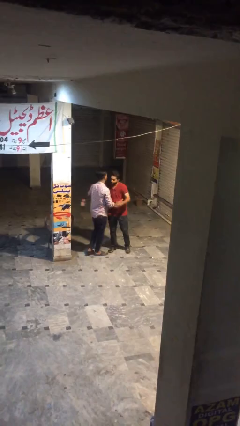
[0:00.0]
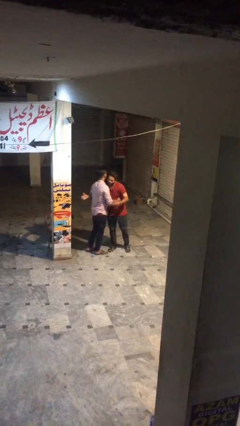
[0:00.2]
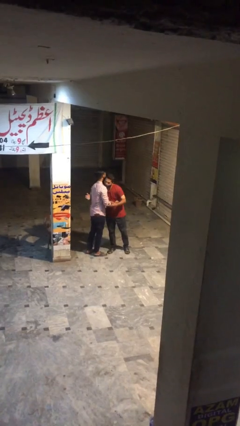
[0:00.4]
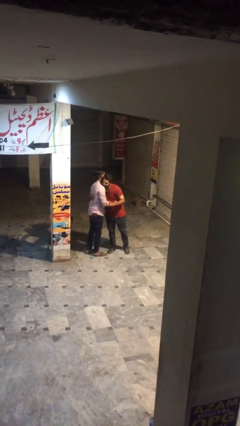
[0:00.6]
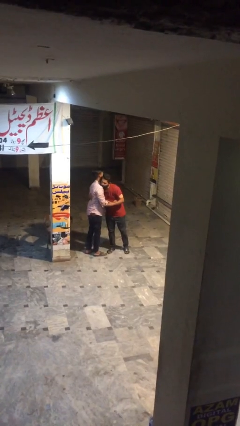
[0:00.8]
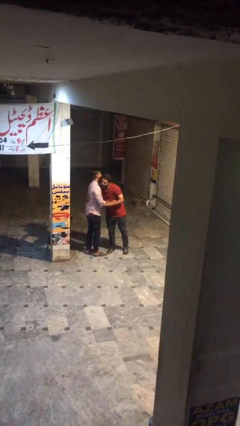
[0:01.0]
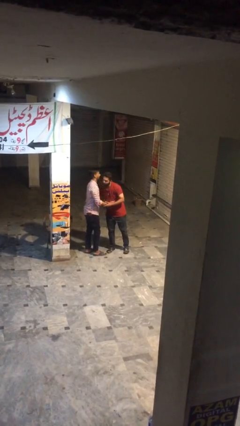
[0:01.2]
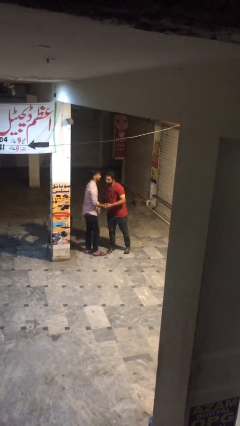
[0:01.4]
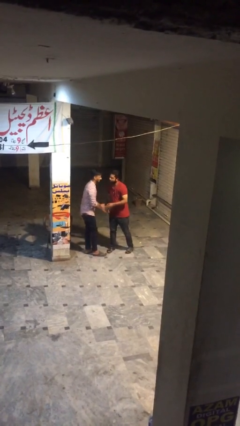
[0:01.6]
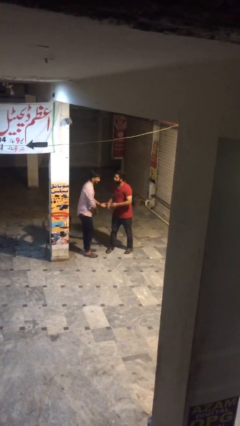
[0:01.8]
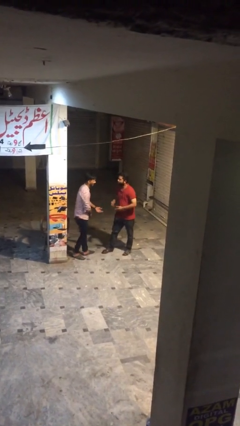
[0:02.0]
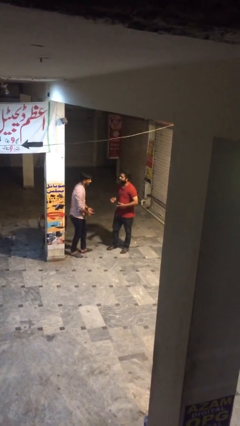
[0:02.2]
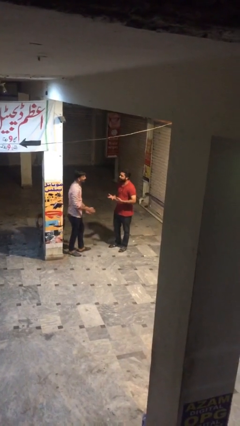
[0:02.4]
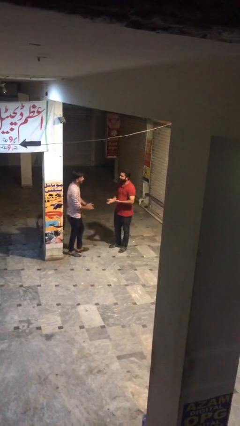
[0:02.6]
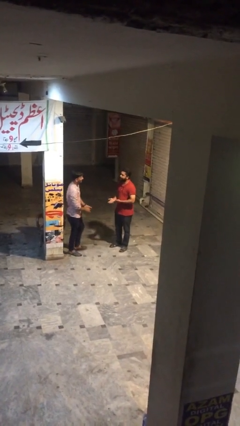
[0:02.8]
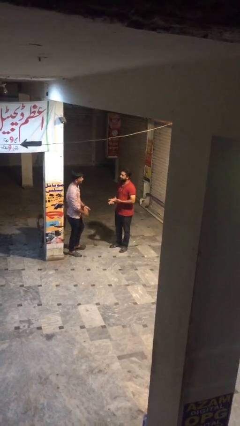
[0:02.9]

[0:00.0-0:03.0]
person embraces person

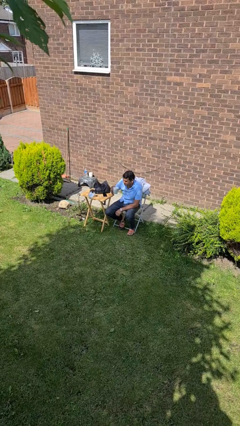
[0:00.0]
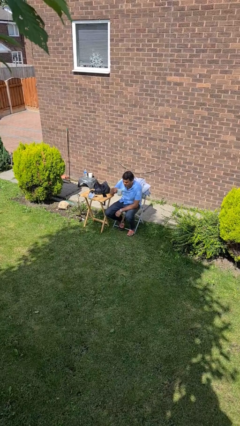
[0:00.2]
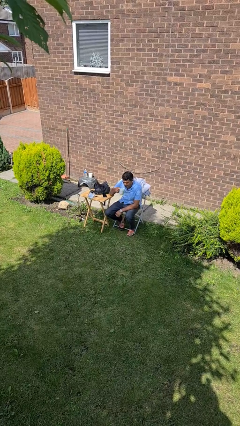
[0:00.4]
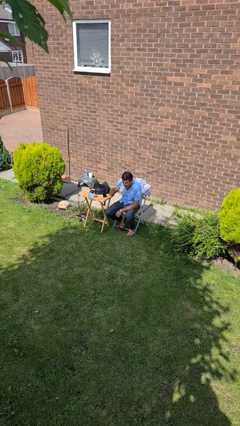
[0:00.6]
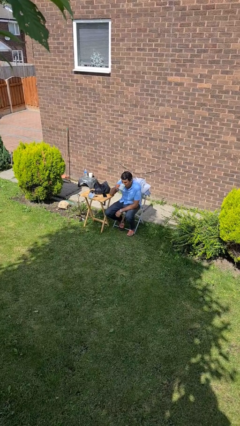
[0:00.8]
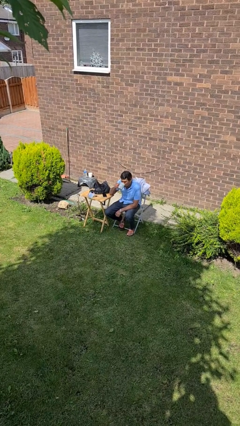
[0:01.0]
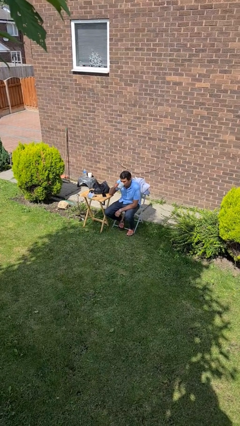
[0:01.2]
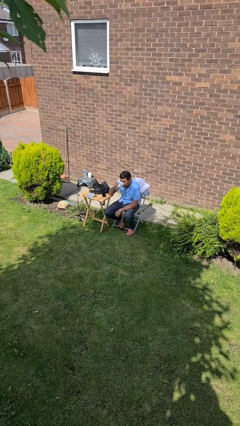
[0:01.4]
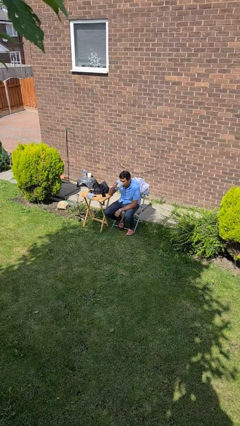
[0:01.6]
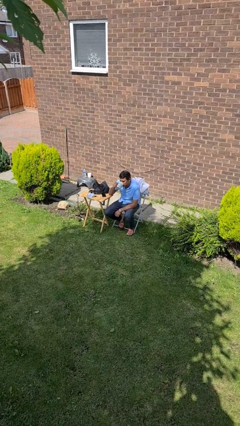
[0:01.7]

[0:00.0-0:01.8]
person drinks from mug

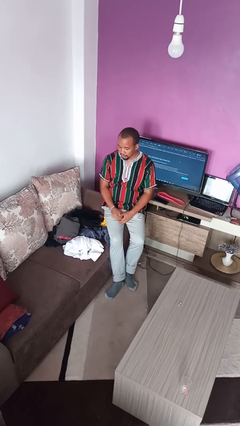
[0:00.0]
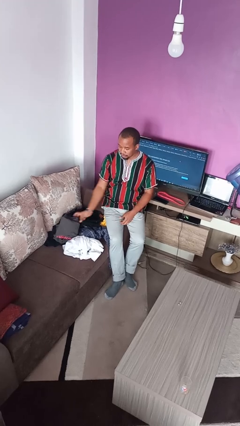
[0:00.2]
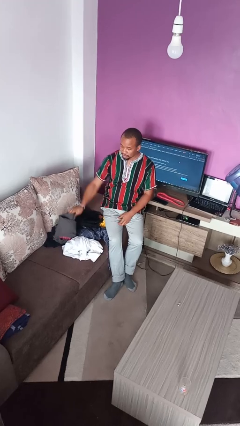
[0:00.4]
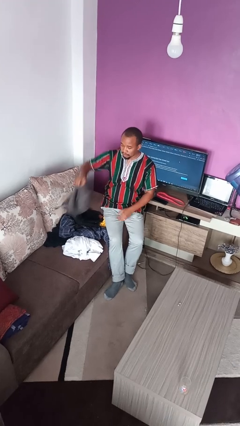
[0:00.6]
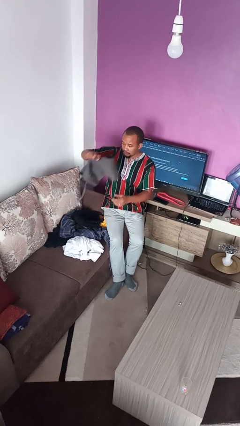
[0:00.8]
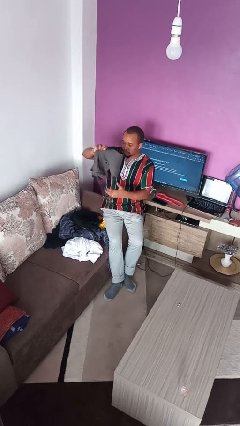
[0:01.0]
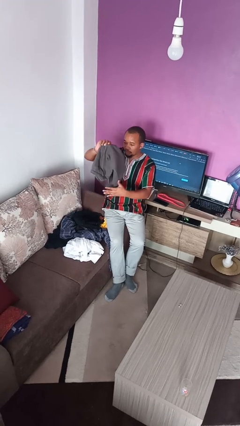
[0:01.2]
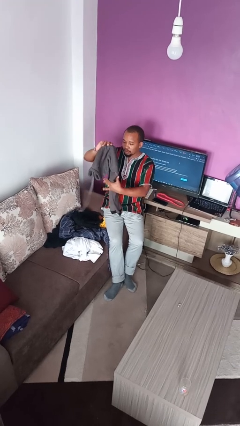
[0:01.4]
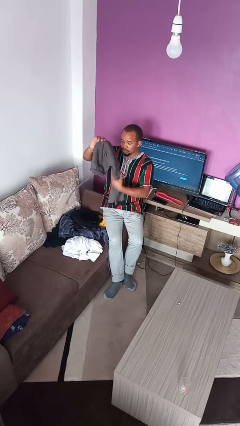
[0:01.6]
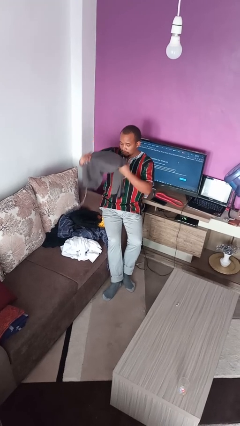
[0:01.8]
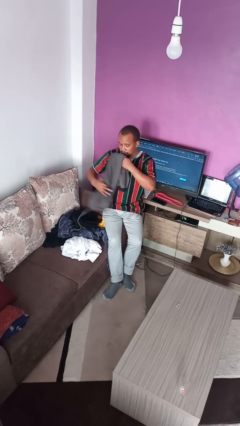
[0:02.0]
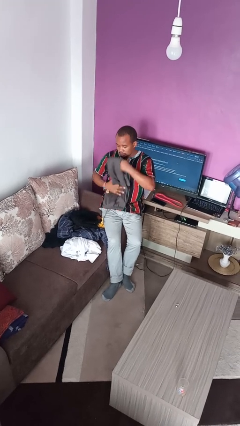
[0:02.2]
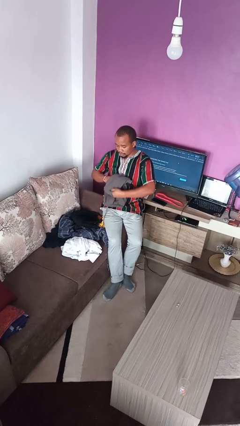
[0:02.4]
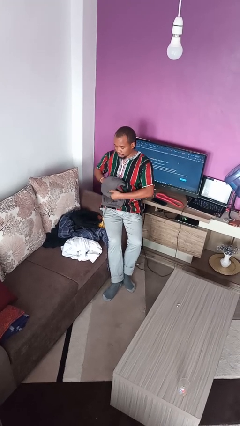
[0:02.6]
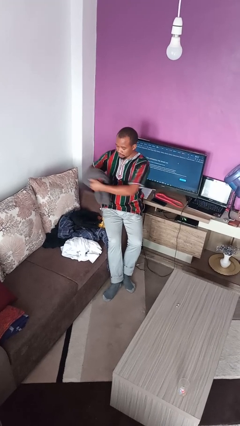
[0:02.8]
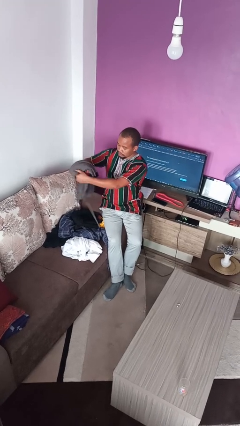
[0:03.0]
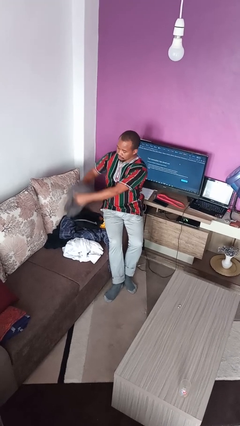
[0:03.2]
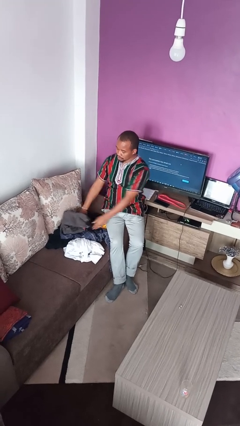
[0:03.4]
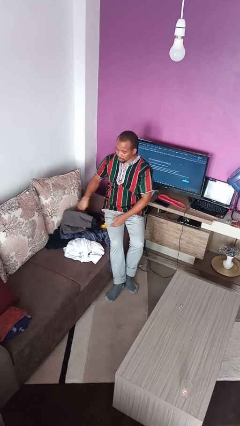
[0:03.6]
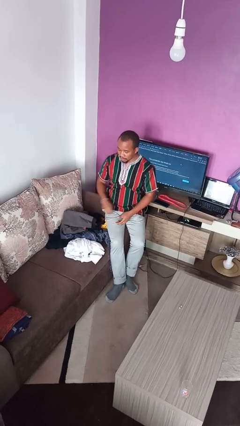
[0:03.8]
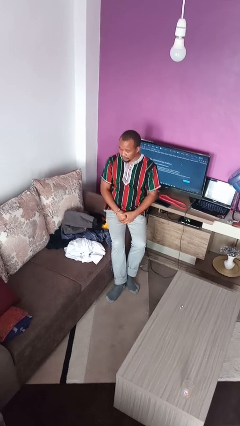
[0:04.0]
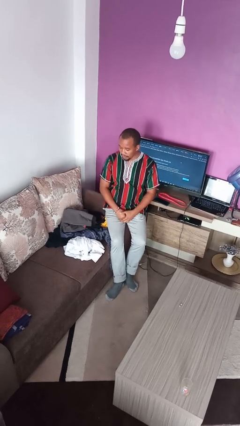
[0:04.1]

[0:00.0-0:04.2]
person folds pants

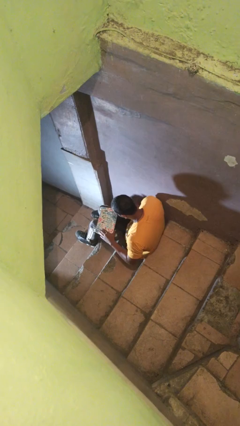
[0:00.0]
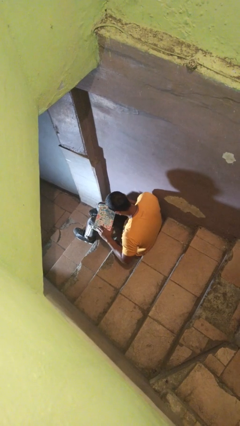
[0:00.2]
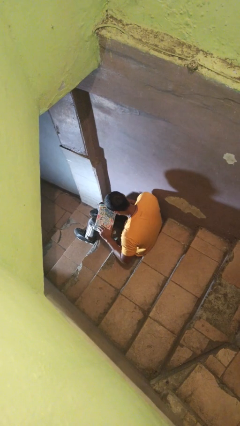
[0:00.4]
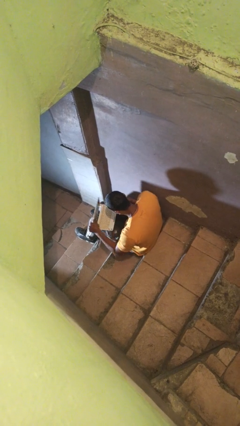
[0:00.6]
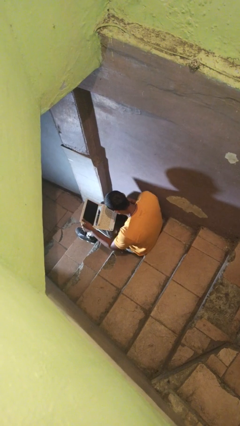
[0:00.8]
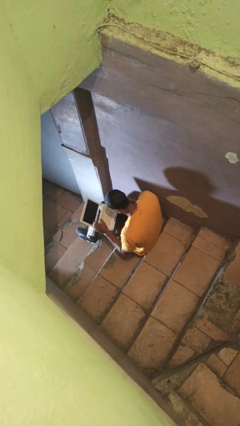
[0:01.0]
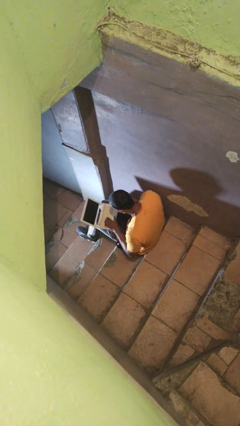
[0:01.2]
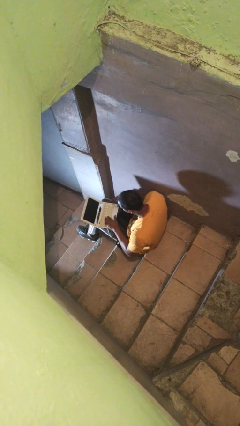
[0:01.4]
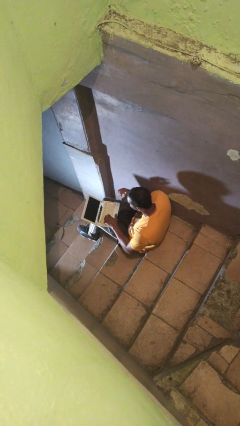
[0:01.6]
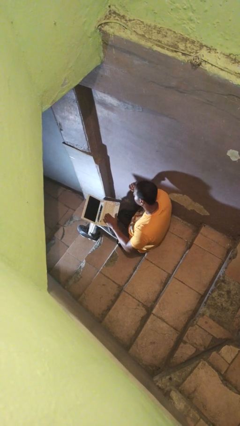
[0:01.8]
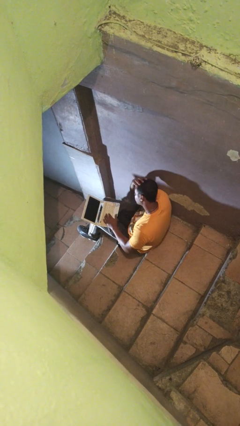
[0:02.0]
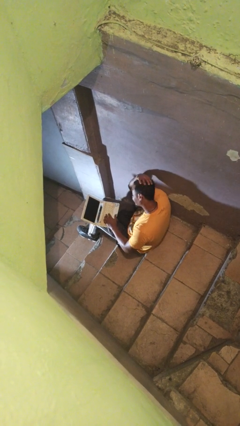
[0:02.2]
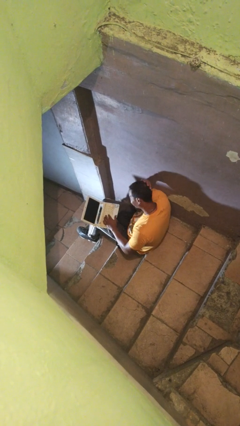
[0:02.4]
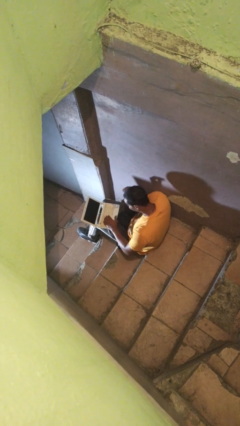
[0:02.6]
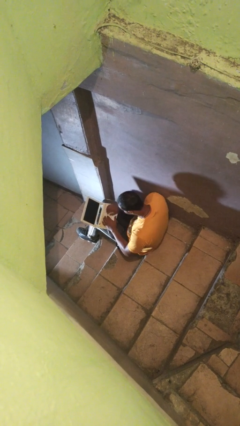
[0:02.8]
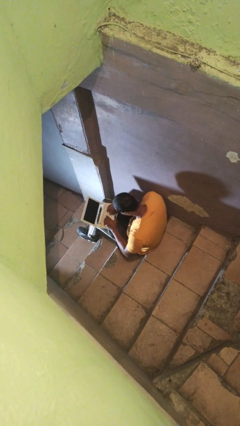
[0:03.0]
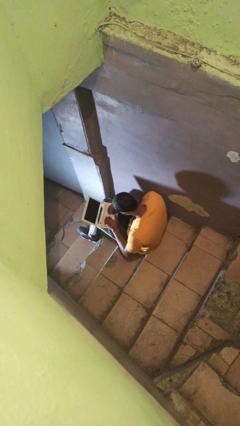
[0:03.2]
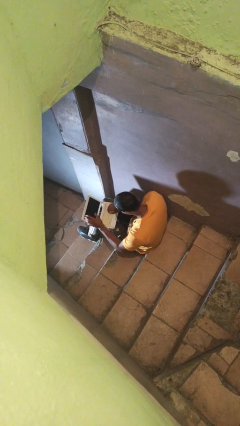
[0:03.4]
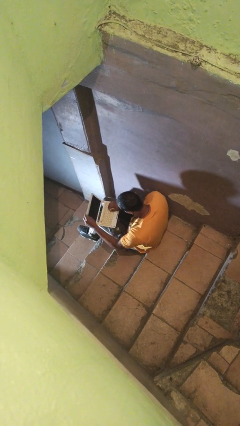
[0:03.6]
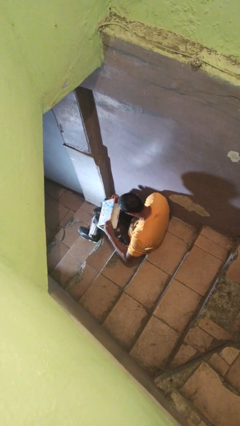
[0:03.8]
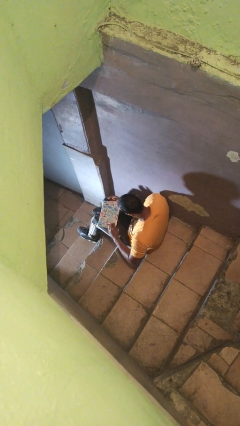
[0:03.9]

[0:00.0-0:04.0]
person interacts with laptop

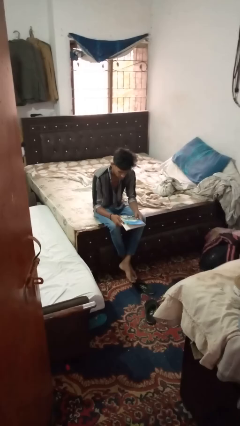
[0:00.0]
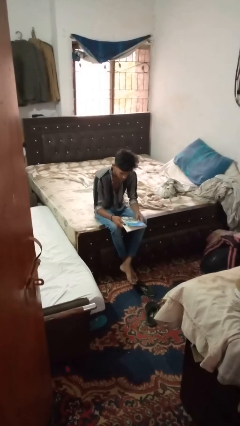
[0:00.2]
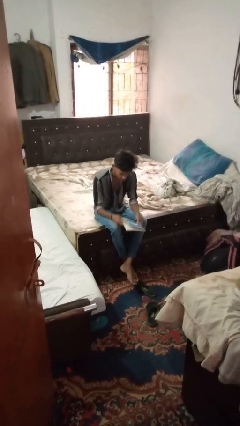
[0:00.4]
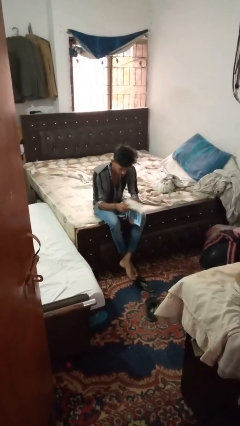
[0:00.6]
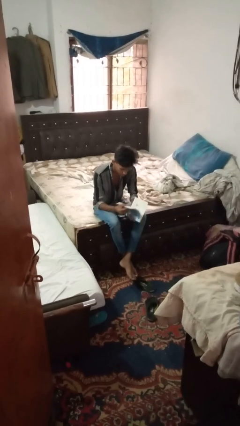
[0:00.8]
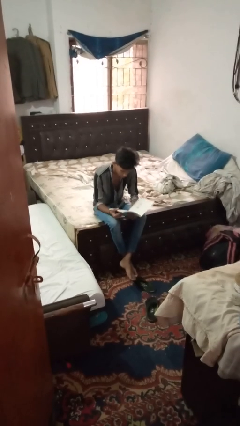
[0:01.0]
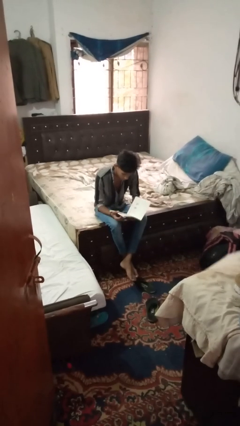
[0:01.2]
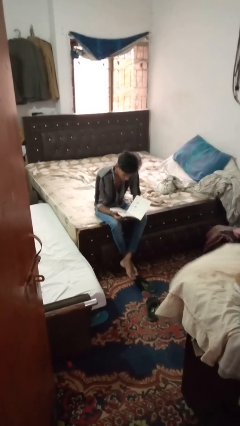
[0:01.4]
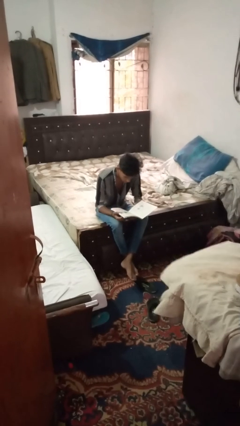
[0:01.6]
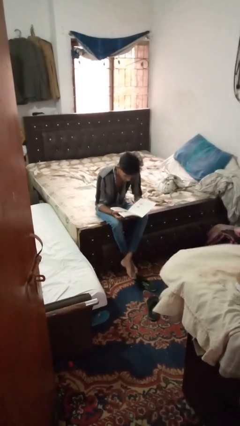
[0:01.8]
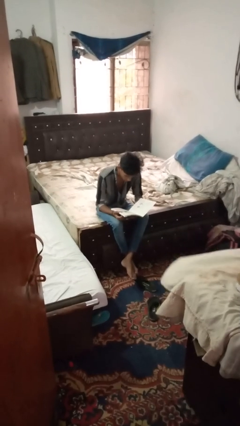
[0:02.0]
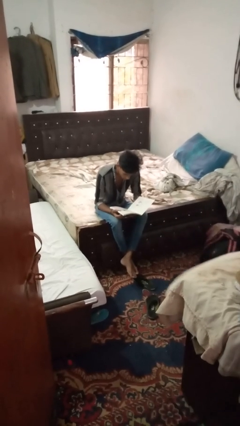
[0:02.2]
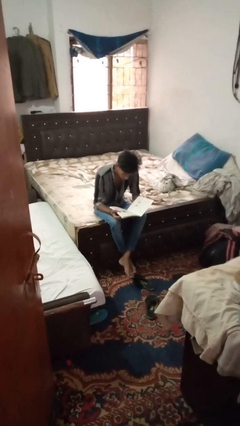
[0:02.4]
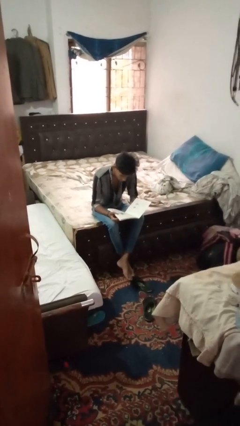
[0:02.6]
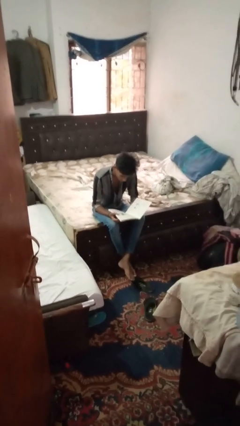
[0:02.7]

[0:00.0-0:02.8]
person reads book

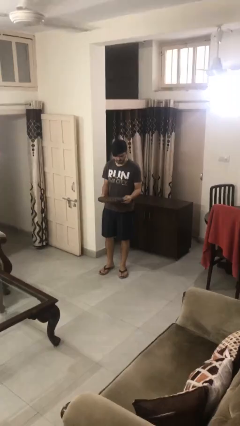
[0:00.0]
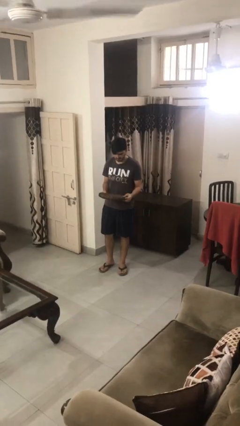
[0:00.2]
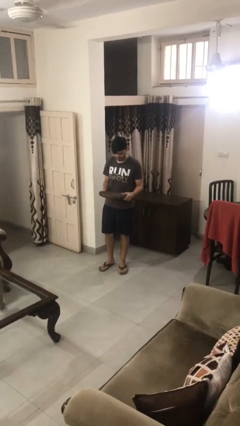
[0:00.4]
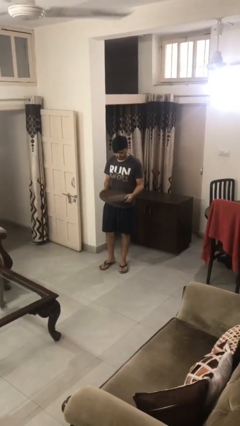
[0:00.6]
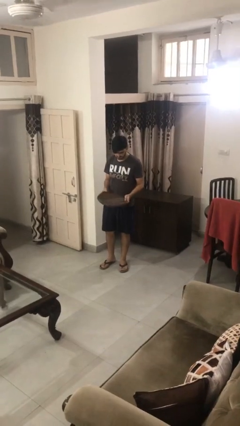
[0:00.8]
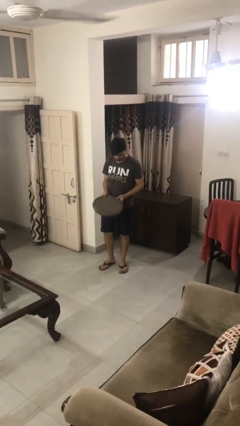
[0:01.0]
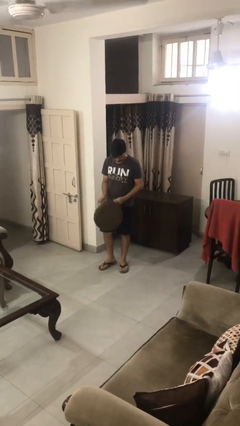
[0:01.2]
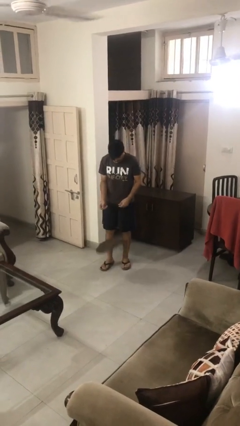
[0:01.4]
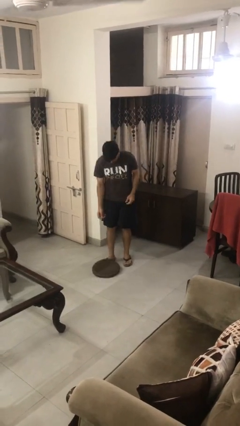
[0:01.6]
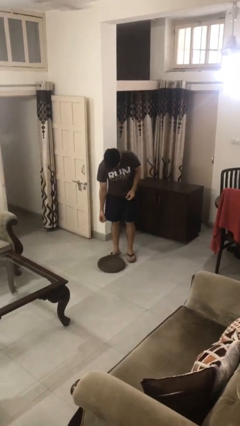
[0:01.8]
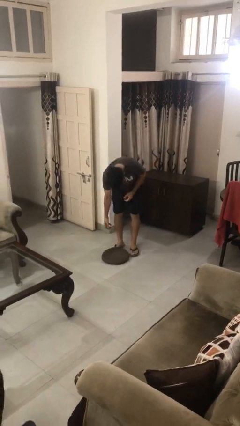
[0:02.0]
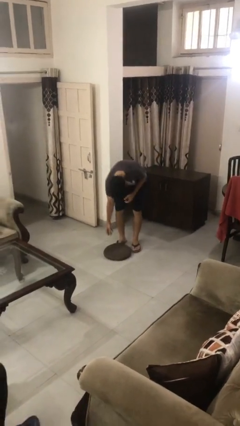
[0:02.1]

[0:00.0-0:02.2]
person drops object
